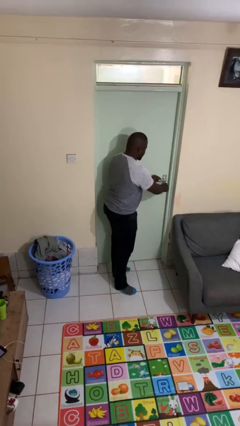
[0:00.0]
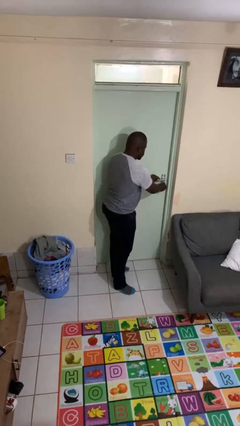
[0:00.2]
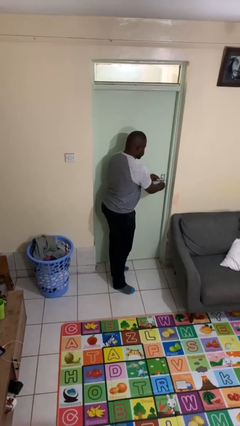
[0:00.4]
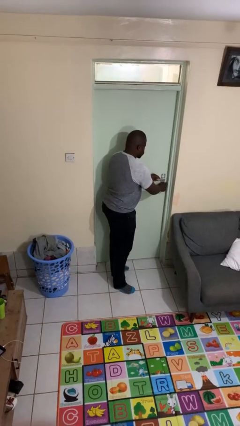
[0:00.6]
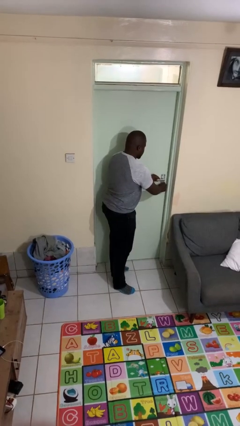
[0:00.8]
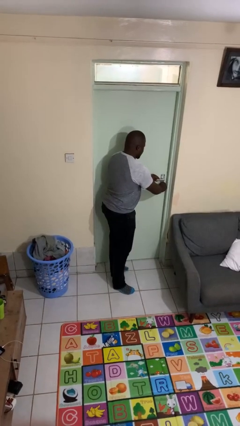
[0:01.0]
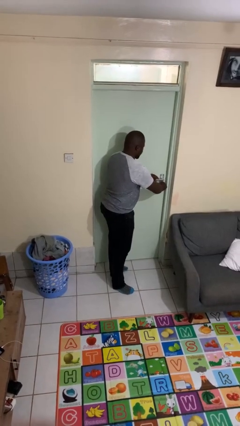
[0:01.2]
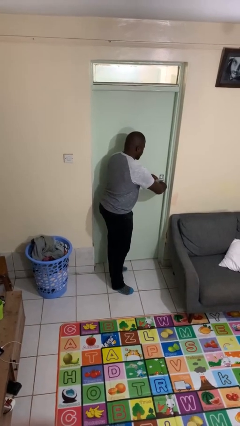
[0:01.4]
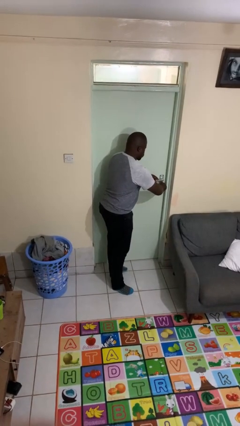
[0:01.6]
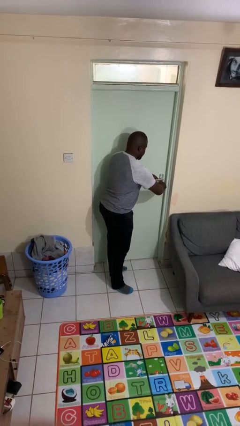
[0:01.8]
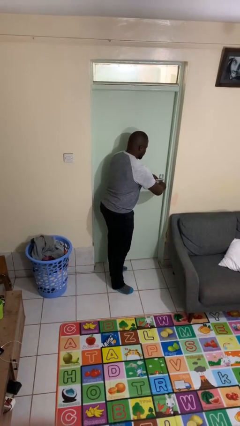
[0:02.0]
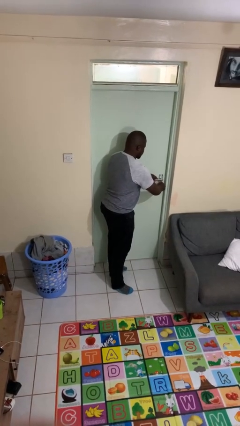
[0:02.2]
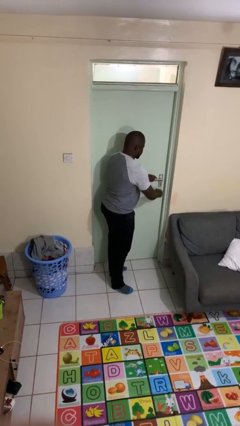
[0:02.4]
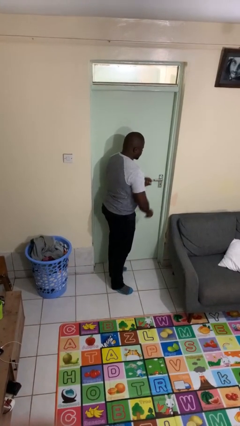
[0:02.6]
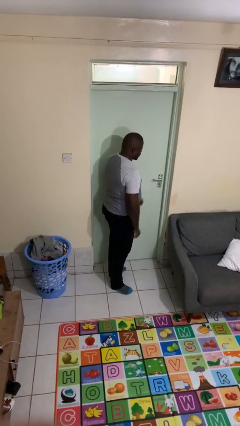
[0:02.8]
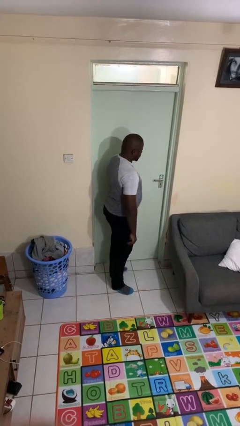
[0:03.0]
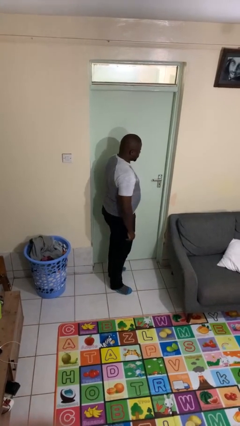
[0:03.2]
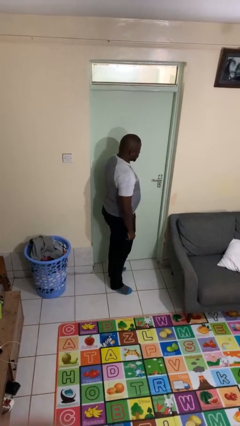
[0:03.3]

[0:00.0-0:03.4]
person locks door with keys

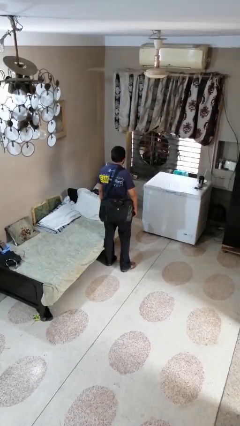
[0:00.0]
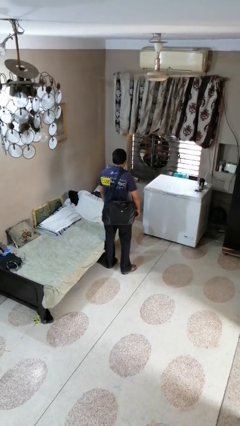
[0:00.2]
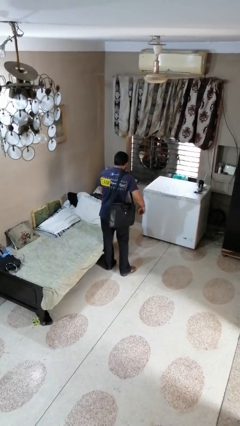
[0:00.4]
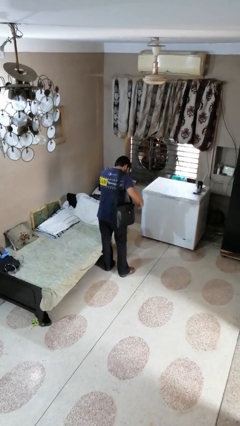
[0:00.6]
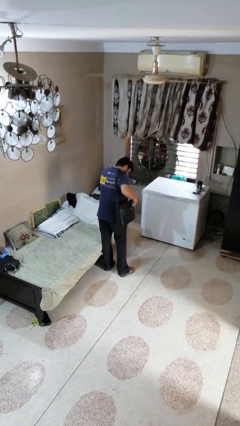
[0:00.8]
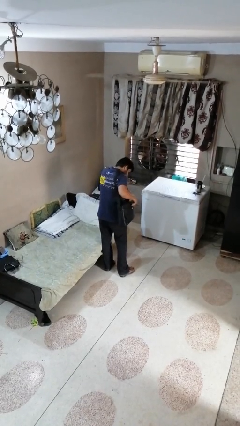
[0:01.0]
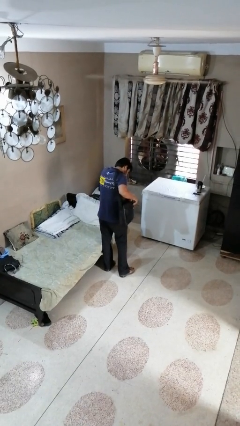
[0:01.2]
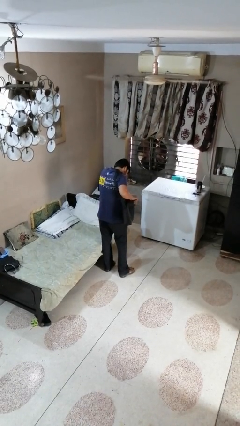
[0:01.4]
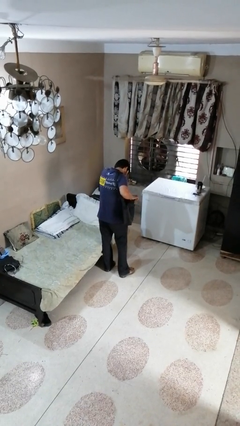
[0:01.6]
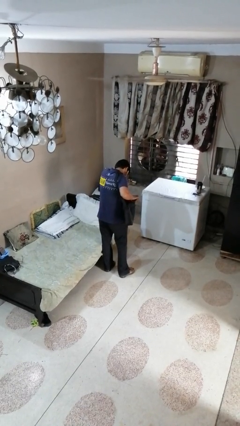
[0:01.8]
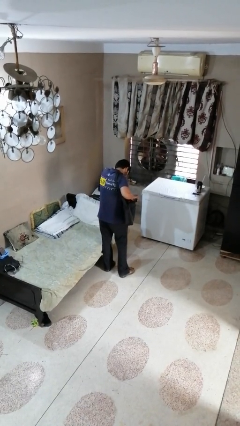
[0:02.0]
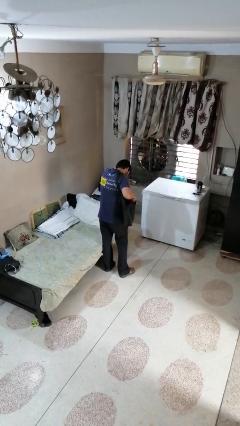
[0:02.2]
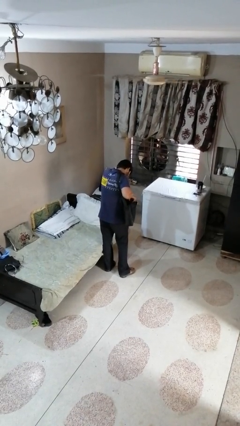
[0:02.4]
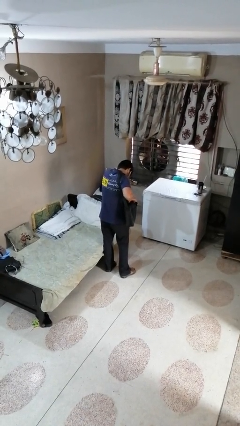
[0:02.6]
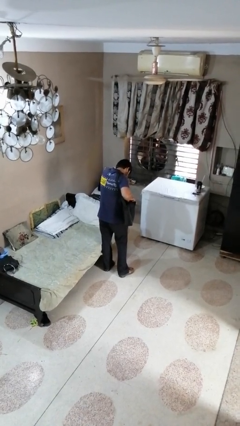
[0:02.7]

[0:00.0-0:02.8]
person searches in backpack

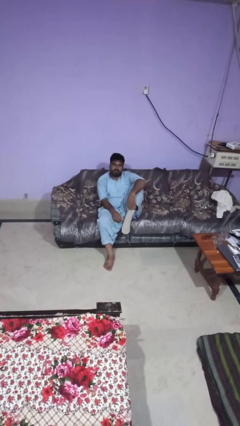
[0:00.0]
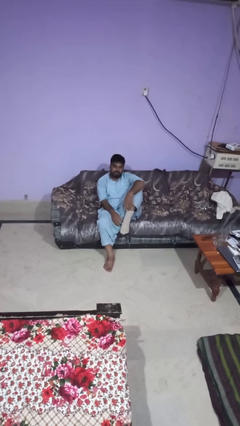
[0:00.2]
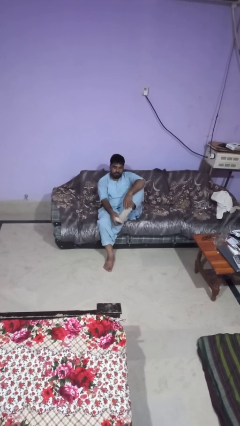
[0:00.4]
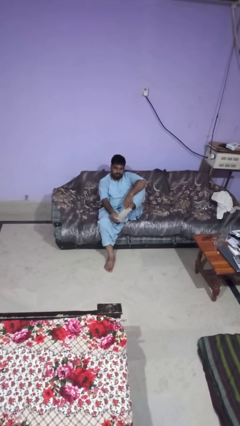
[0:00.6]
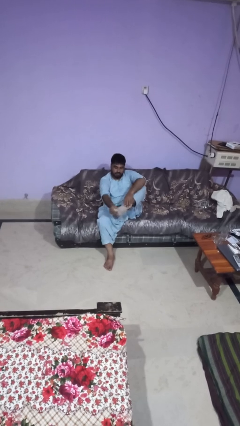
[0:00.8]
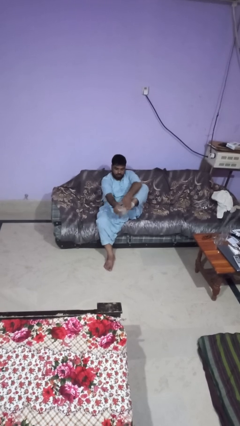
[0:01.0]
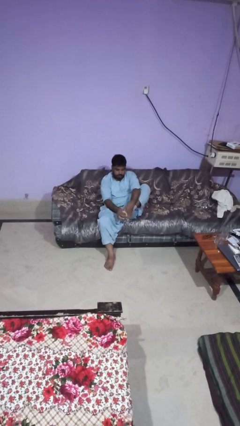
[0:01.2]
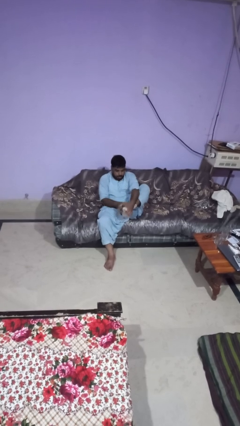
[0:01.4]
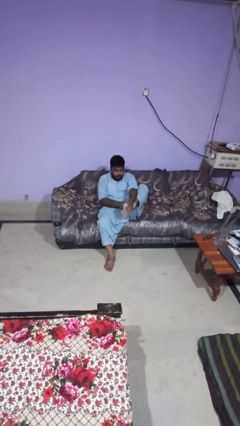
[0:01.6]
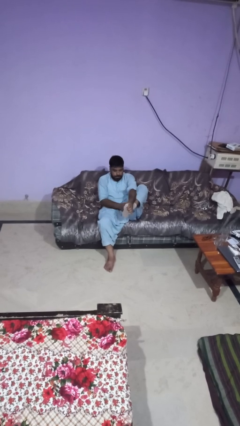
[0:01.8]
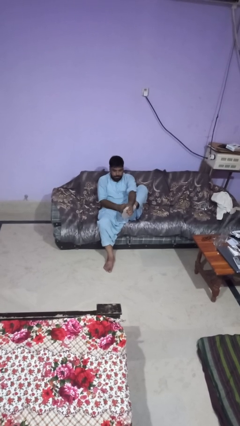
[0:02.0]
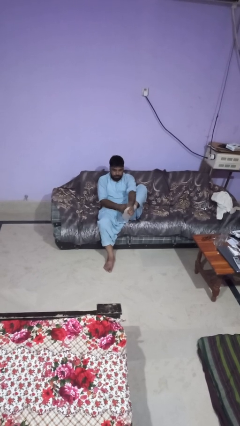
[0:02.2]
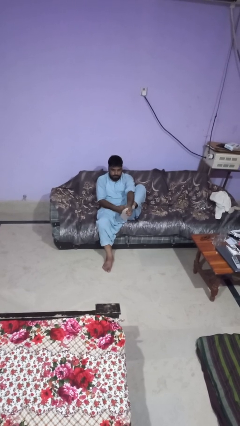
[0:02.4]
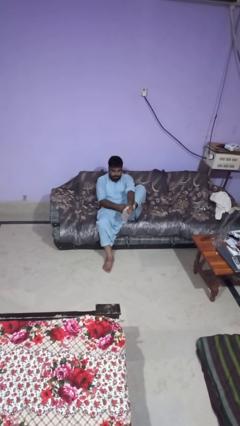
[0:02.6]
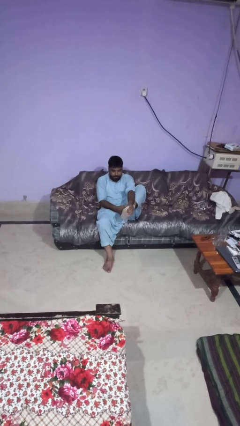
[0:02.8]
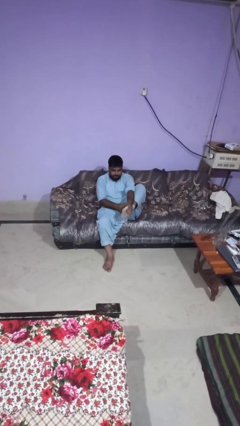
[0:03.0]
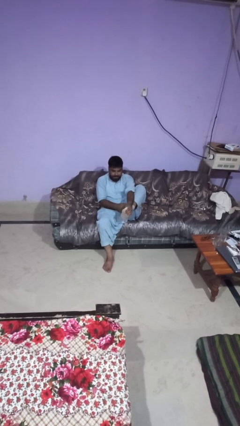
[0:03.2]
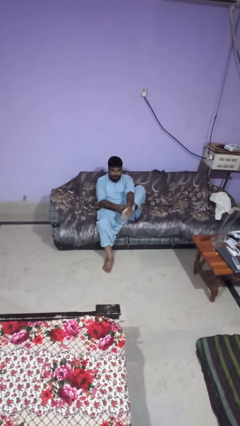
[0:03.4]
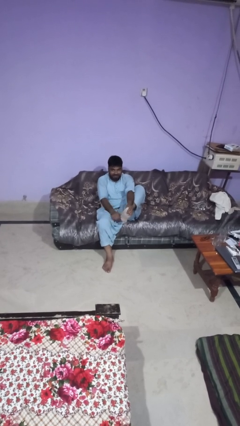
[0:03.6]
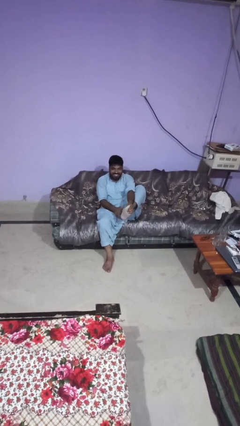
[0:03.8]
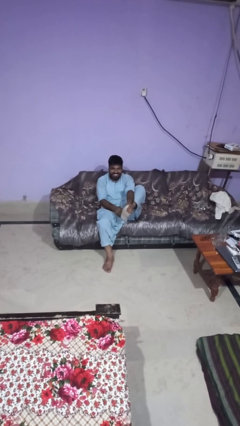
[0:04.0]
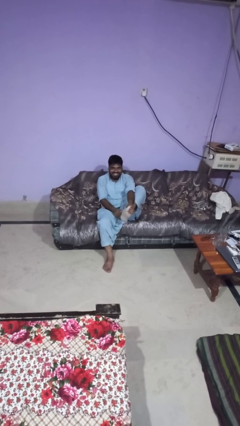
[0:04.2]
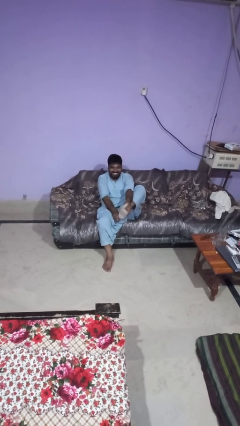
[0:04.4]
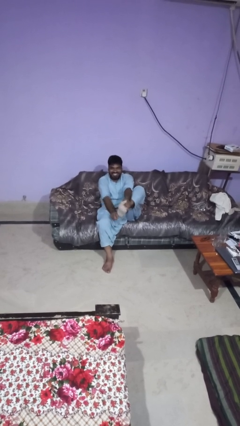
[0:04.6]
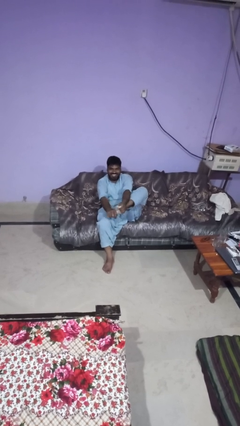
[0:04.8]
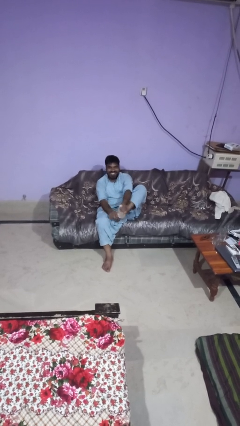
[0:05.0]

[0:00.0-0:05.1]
person takes off socks

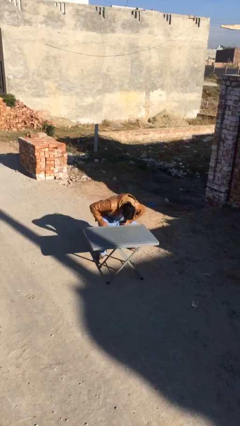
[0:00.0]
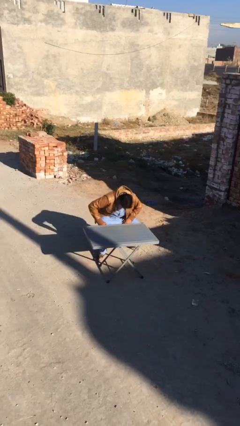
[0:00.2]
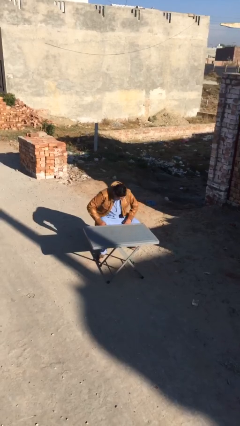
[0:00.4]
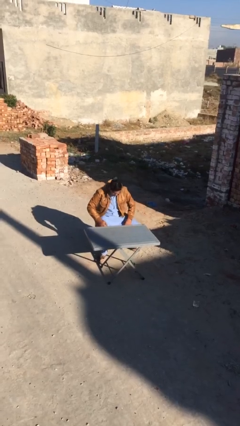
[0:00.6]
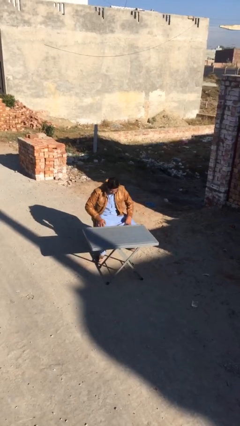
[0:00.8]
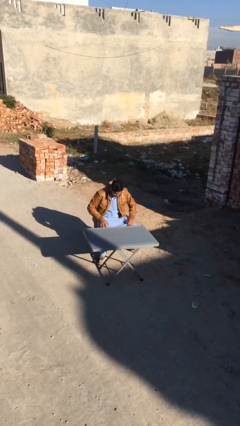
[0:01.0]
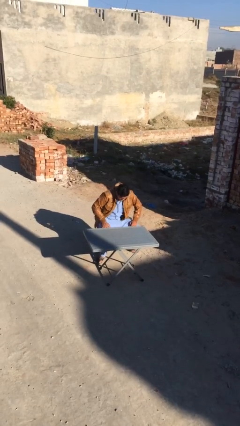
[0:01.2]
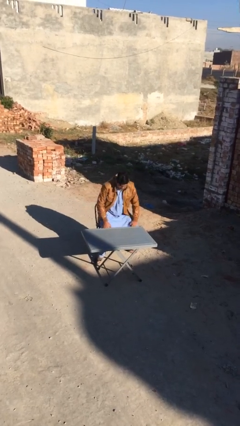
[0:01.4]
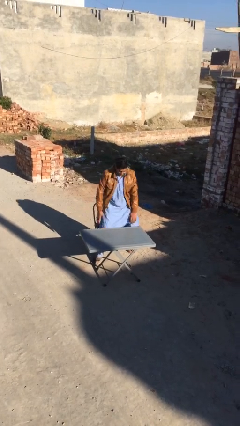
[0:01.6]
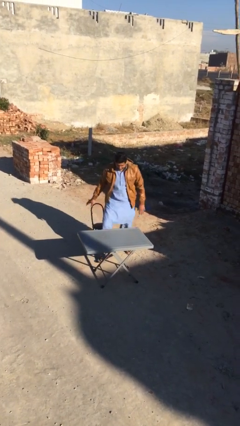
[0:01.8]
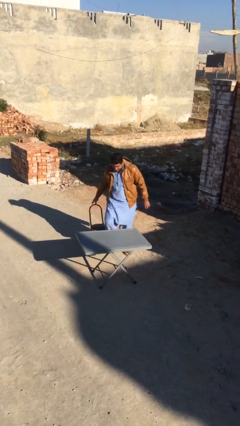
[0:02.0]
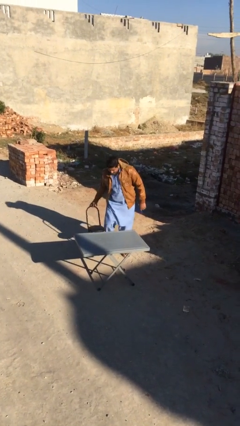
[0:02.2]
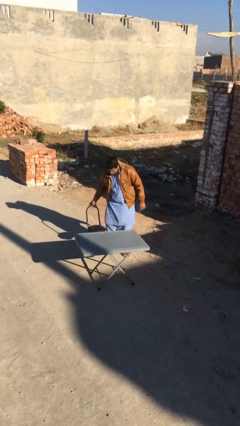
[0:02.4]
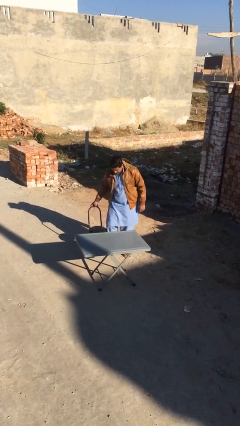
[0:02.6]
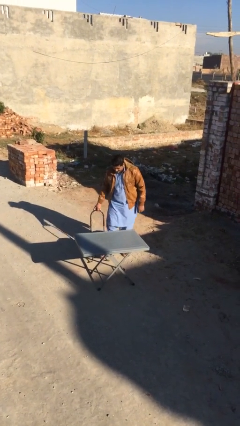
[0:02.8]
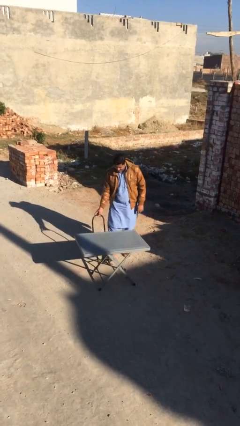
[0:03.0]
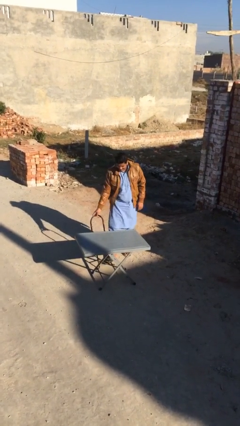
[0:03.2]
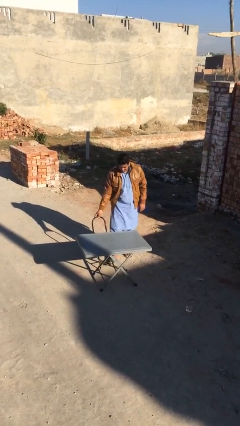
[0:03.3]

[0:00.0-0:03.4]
person stands up

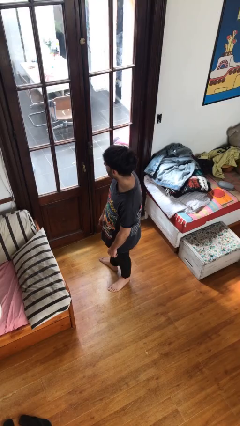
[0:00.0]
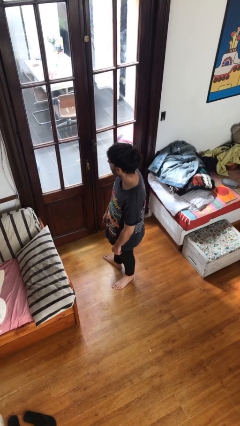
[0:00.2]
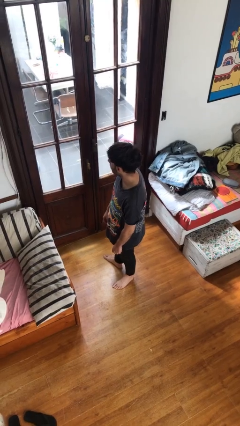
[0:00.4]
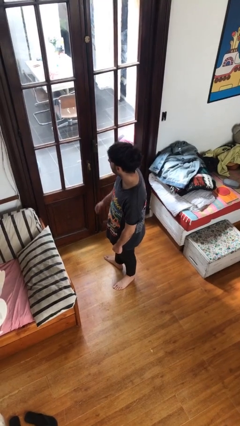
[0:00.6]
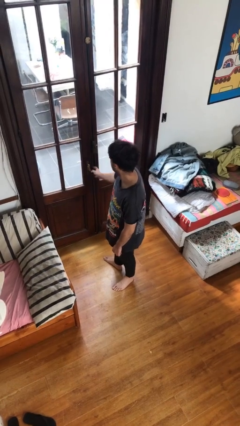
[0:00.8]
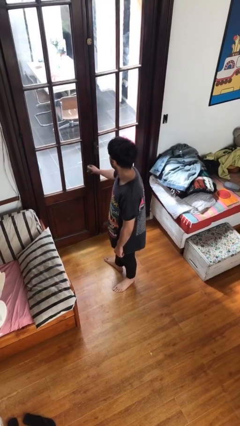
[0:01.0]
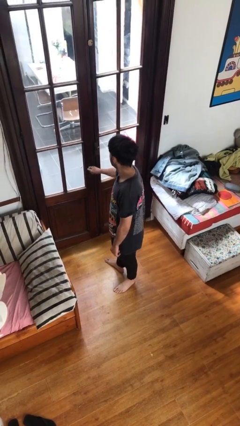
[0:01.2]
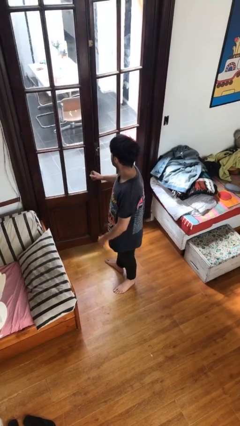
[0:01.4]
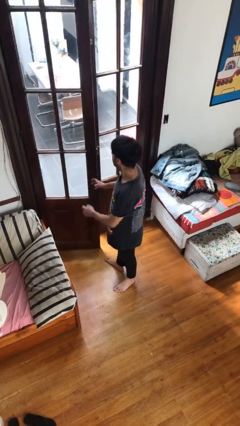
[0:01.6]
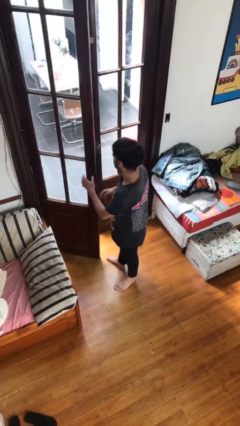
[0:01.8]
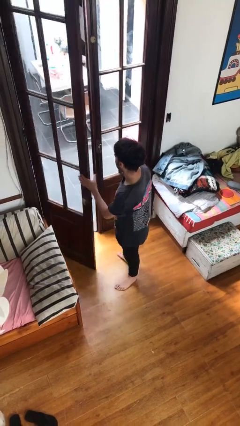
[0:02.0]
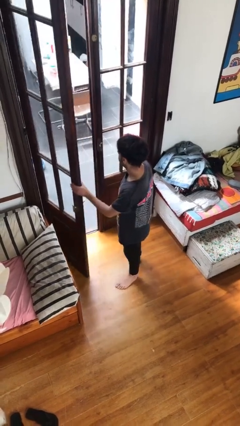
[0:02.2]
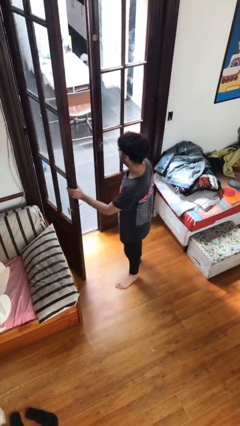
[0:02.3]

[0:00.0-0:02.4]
person opens facility door

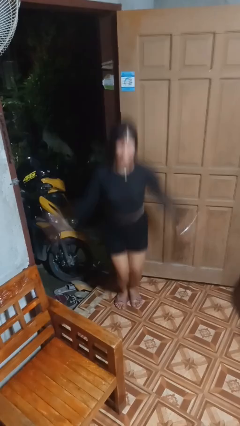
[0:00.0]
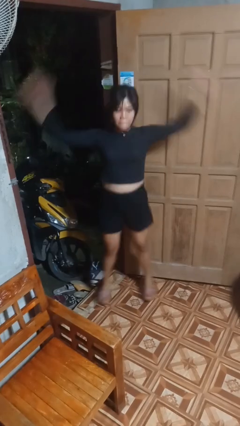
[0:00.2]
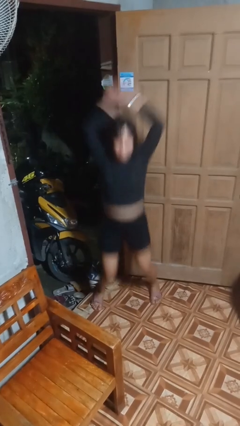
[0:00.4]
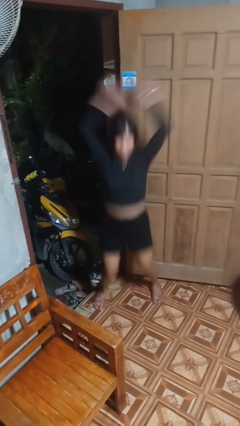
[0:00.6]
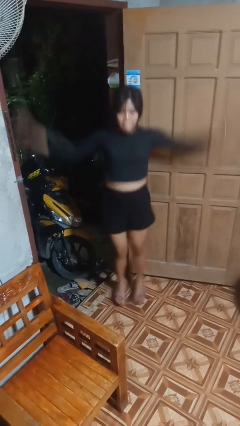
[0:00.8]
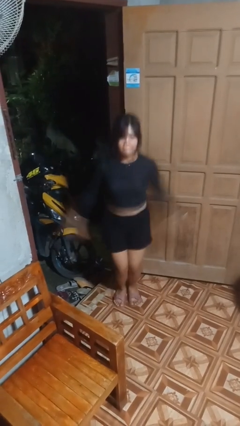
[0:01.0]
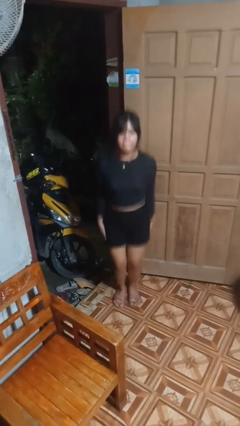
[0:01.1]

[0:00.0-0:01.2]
person exercises with jumping jacks
